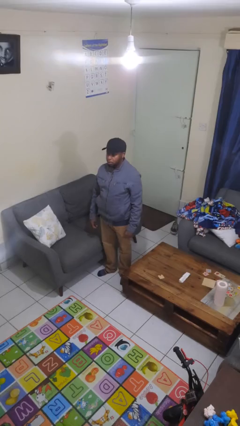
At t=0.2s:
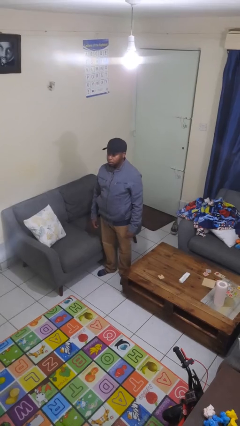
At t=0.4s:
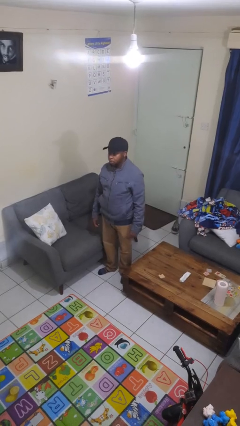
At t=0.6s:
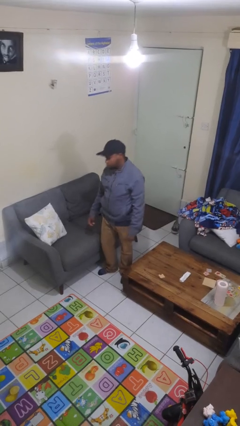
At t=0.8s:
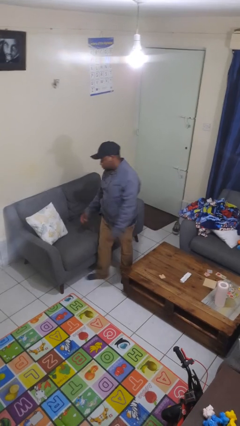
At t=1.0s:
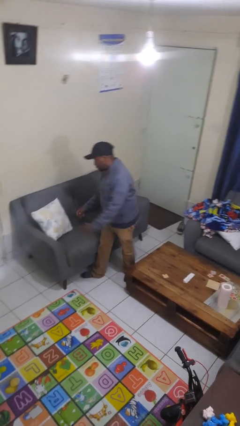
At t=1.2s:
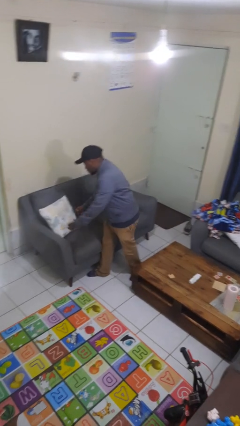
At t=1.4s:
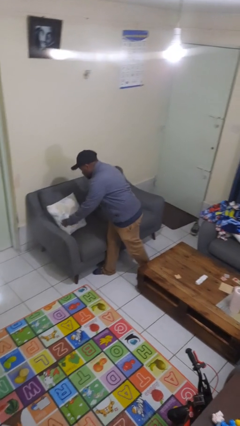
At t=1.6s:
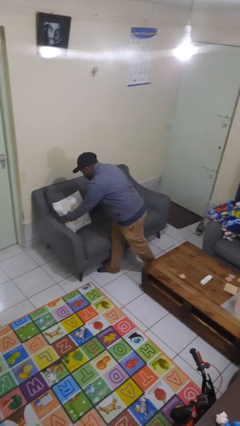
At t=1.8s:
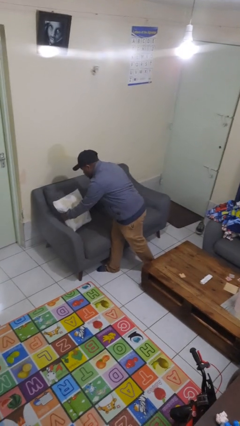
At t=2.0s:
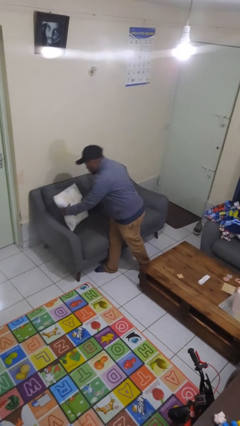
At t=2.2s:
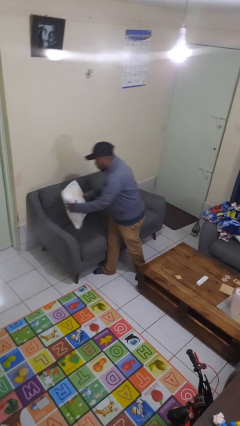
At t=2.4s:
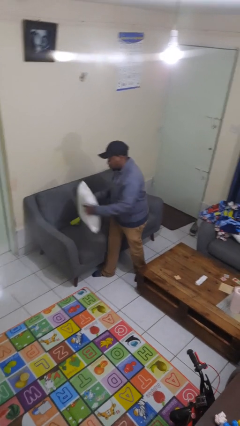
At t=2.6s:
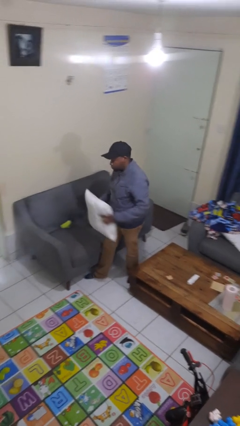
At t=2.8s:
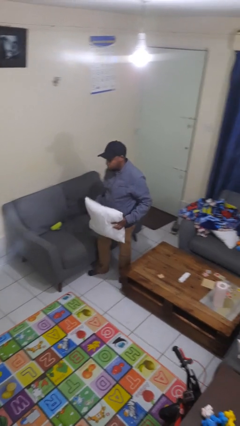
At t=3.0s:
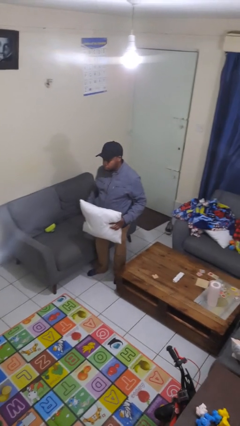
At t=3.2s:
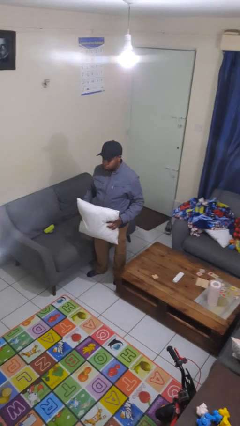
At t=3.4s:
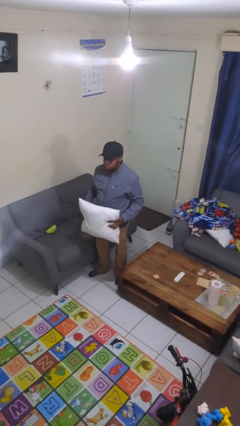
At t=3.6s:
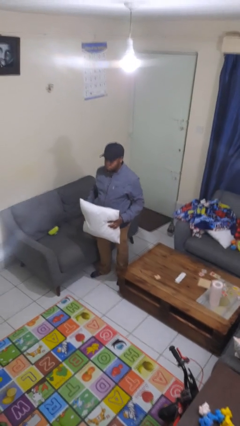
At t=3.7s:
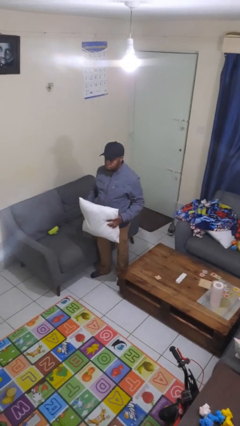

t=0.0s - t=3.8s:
person picks up object from couch

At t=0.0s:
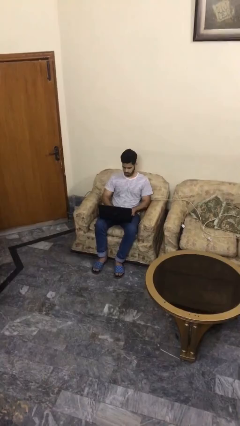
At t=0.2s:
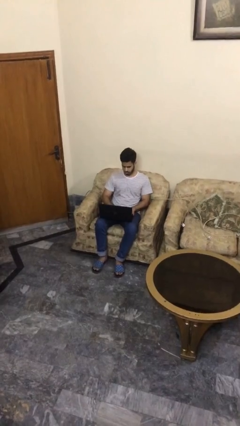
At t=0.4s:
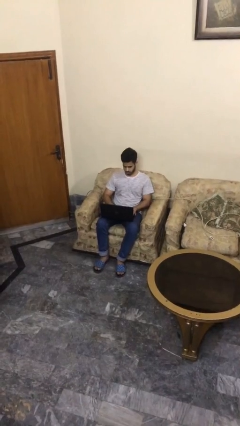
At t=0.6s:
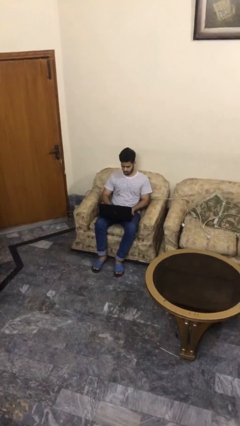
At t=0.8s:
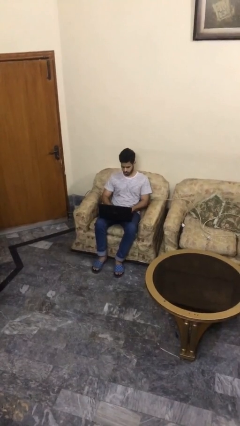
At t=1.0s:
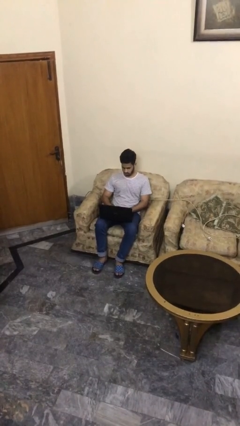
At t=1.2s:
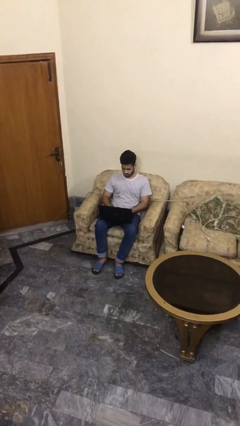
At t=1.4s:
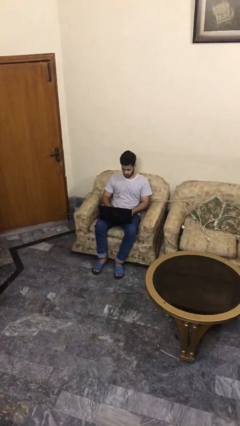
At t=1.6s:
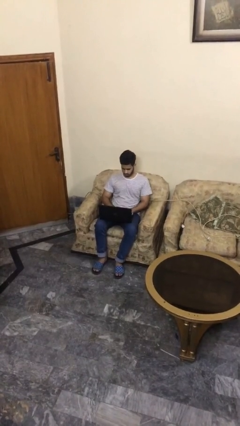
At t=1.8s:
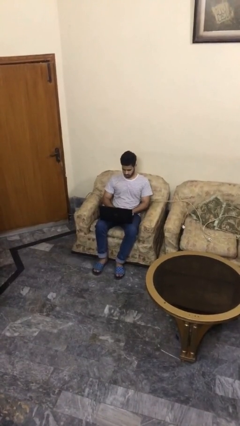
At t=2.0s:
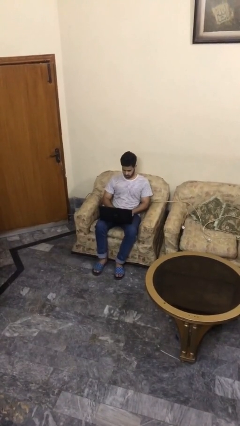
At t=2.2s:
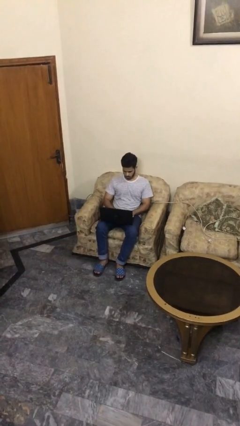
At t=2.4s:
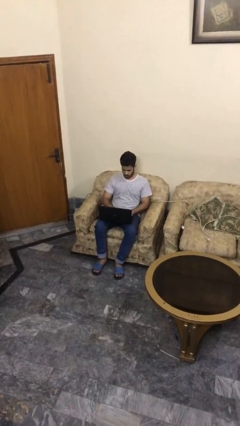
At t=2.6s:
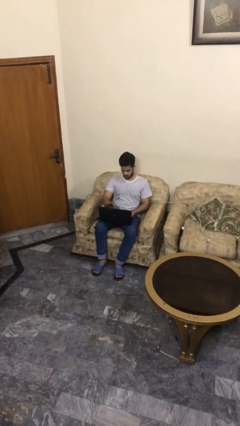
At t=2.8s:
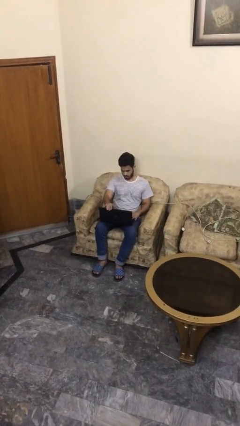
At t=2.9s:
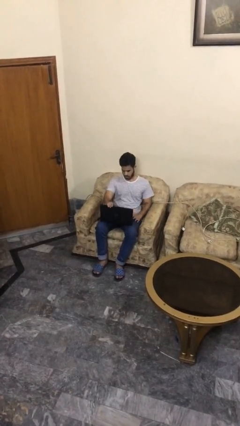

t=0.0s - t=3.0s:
person interacts with laptop

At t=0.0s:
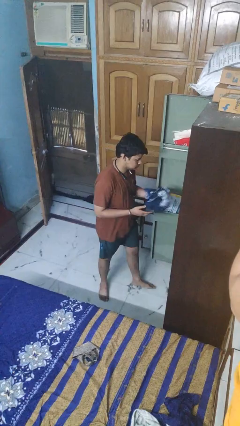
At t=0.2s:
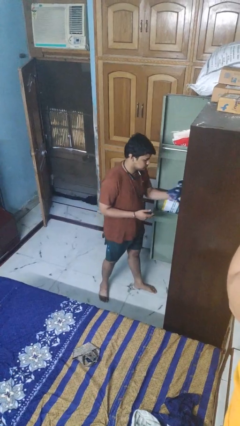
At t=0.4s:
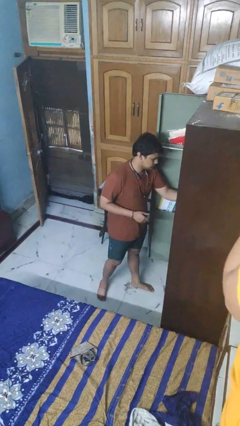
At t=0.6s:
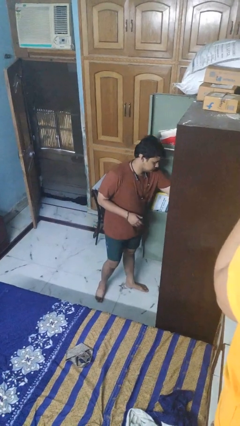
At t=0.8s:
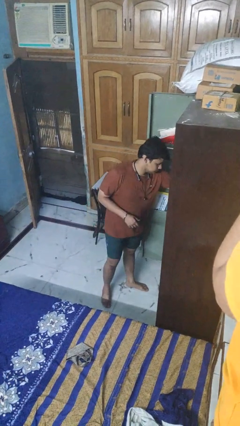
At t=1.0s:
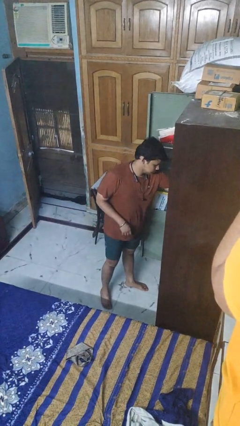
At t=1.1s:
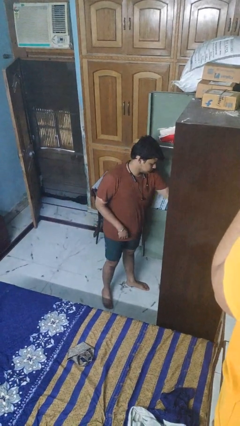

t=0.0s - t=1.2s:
person puts clothes into dresser

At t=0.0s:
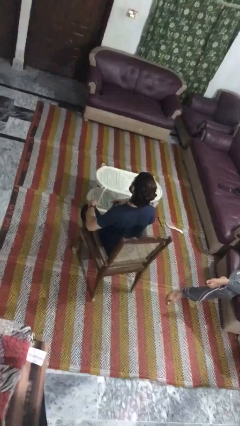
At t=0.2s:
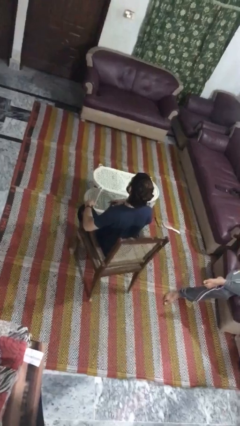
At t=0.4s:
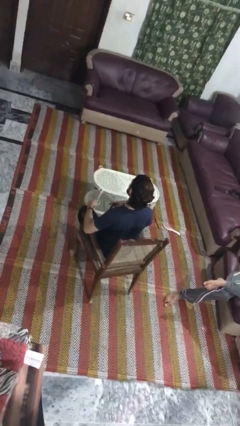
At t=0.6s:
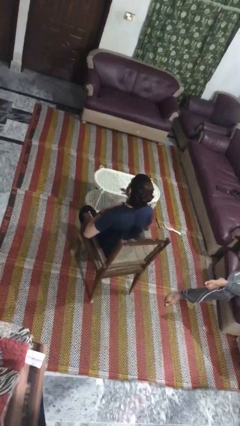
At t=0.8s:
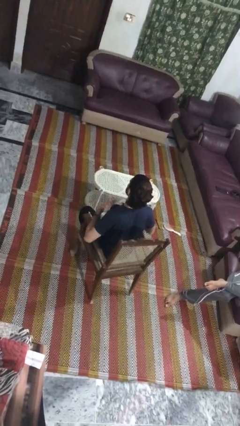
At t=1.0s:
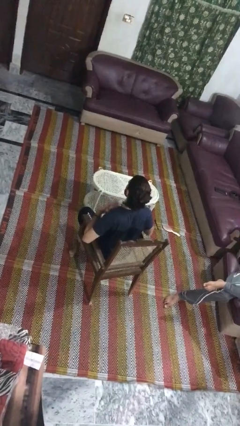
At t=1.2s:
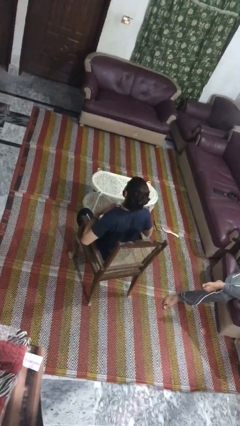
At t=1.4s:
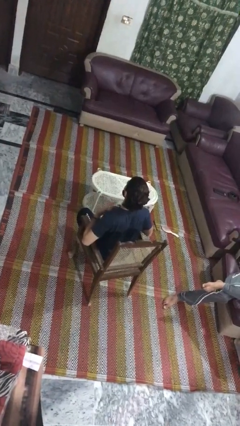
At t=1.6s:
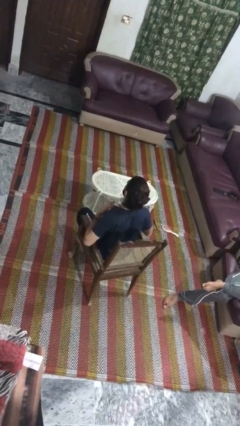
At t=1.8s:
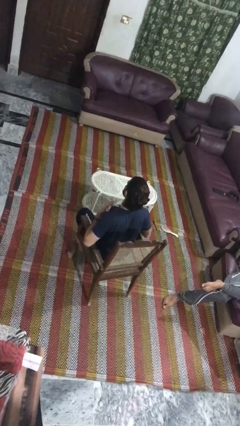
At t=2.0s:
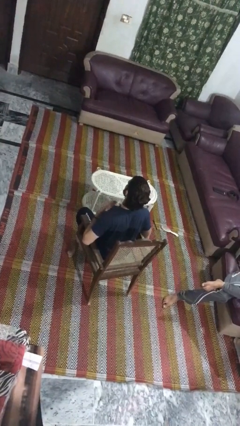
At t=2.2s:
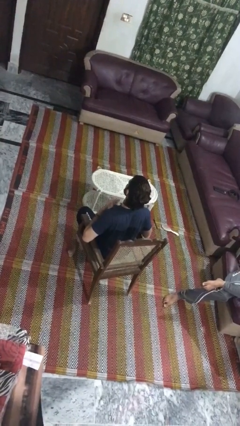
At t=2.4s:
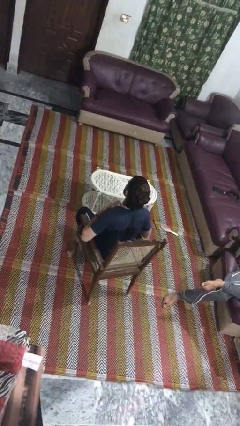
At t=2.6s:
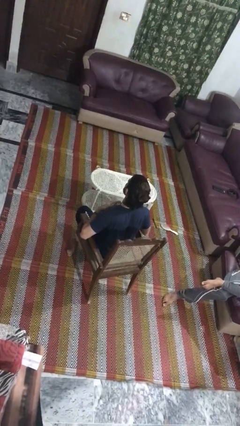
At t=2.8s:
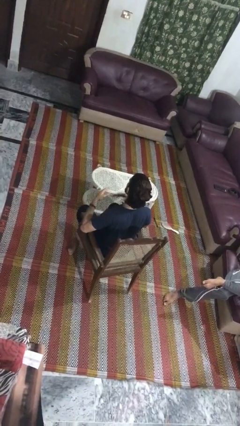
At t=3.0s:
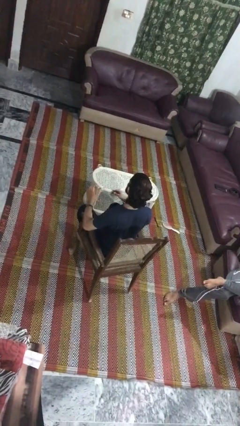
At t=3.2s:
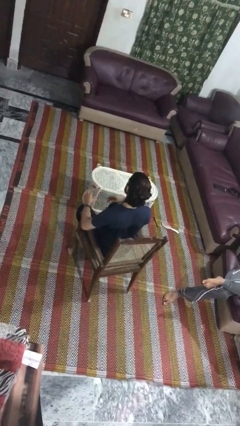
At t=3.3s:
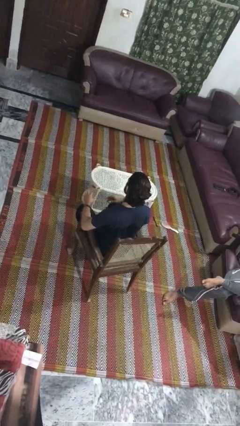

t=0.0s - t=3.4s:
person drums on chest

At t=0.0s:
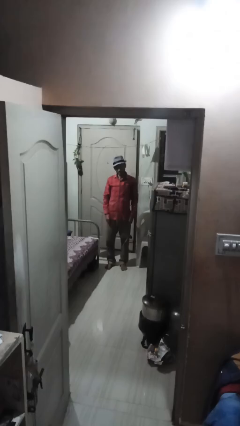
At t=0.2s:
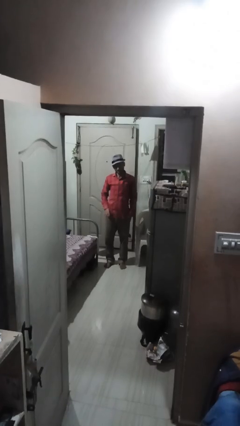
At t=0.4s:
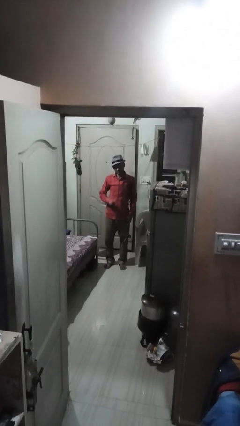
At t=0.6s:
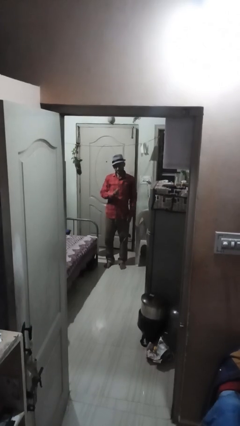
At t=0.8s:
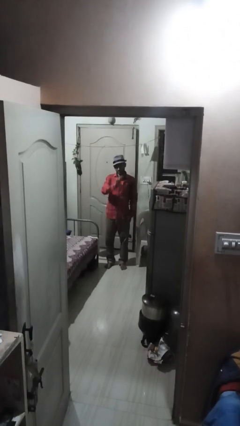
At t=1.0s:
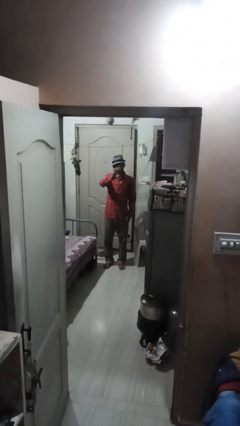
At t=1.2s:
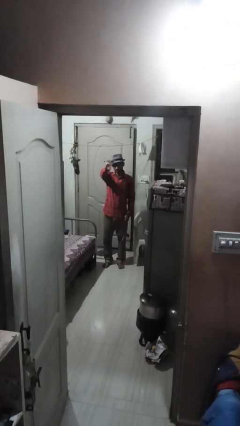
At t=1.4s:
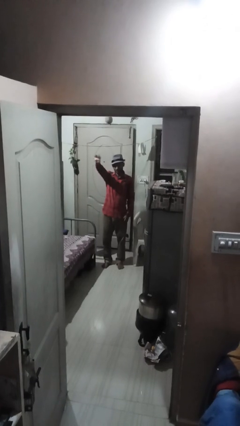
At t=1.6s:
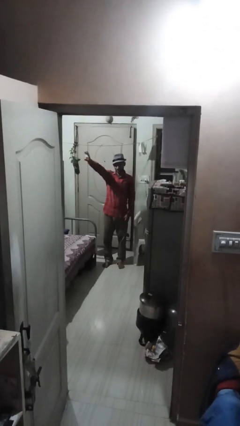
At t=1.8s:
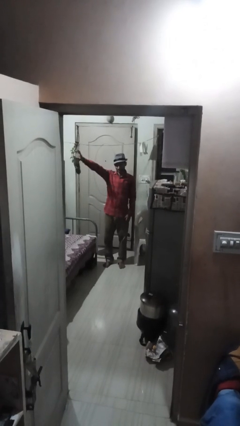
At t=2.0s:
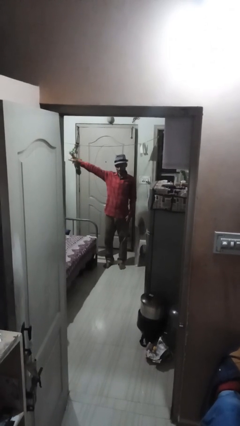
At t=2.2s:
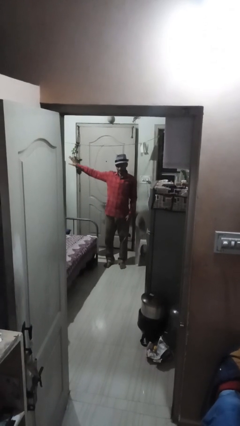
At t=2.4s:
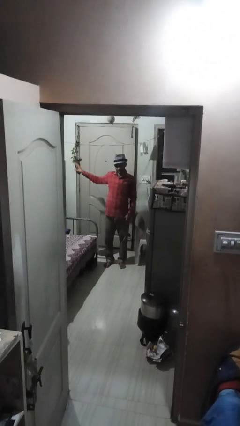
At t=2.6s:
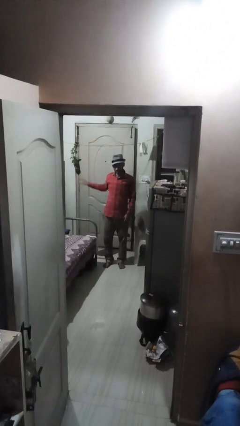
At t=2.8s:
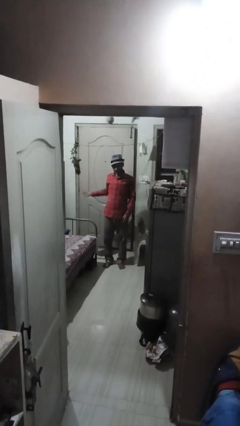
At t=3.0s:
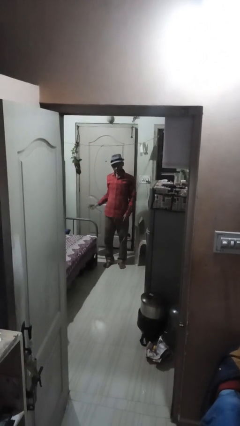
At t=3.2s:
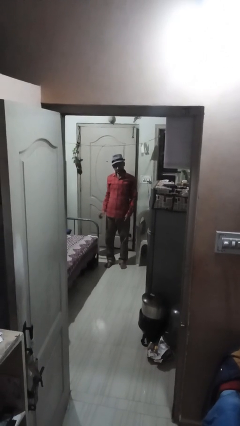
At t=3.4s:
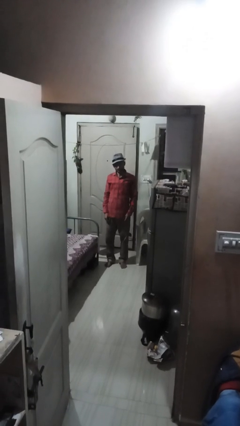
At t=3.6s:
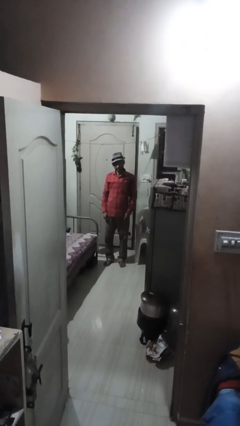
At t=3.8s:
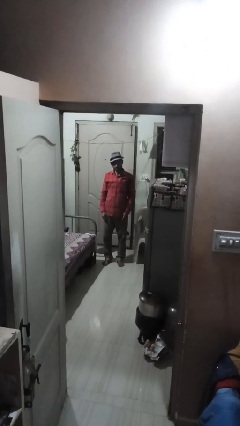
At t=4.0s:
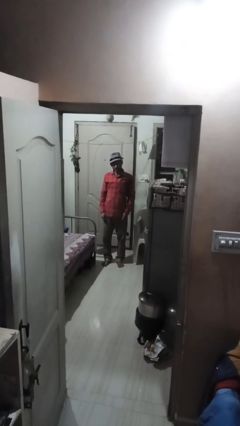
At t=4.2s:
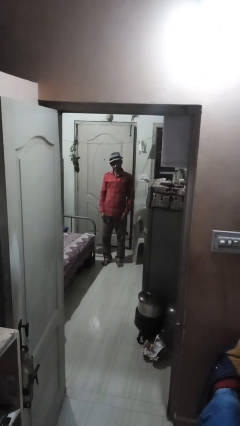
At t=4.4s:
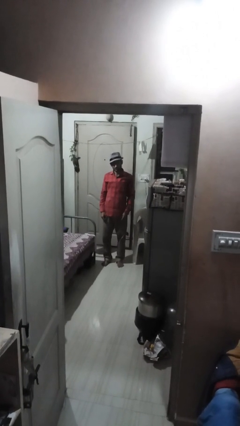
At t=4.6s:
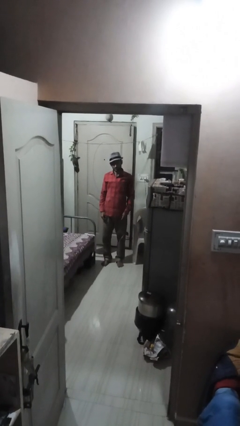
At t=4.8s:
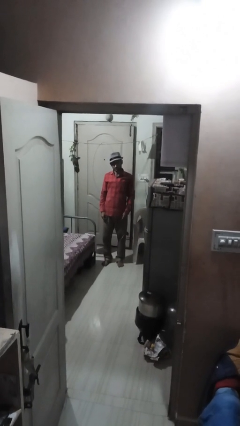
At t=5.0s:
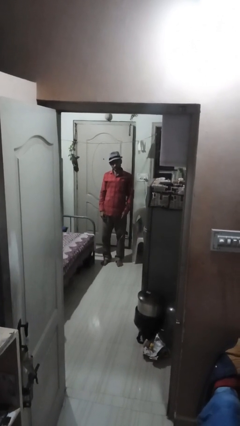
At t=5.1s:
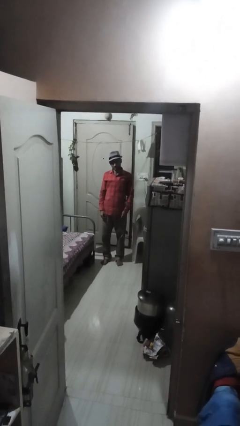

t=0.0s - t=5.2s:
person gestures swipe right

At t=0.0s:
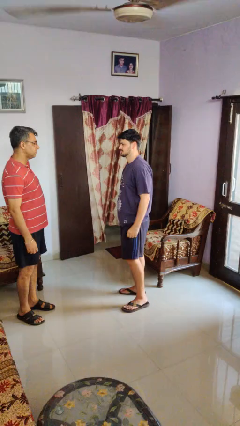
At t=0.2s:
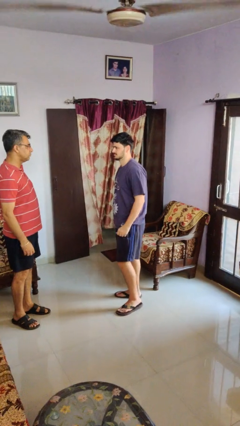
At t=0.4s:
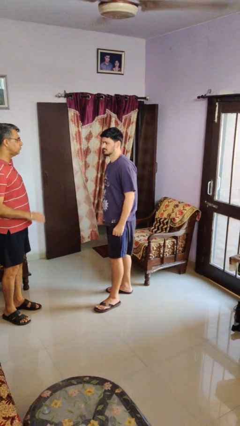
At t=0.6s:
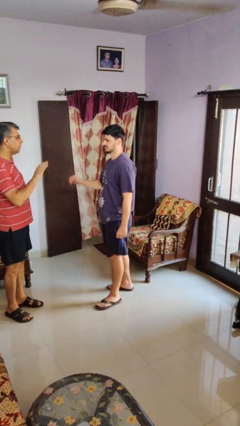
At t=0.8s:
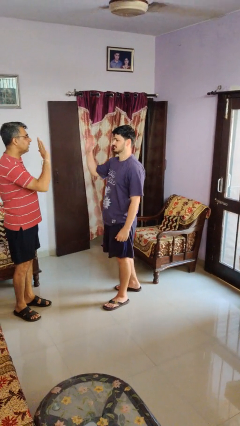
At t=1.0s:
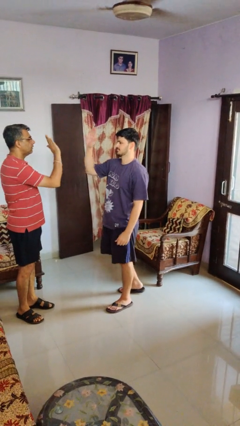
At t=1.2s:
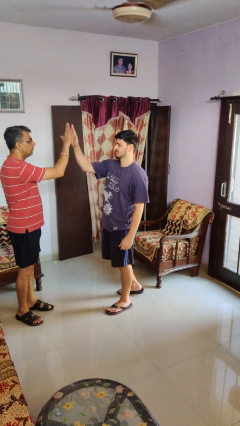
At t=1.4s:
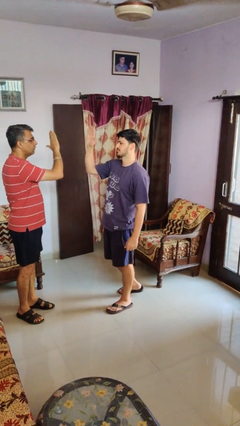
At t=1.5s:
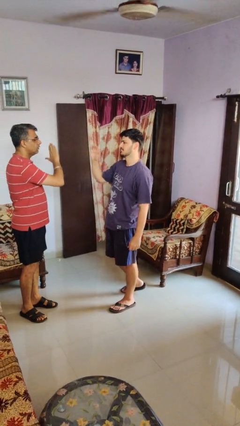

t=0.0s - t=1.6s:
person highfives hand
